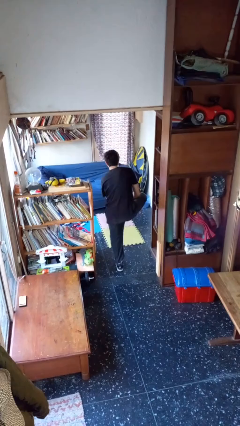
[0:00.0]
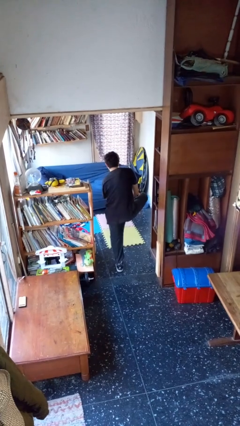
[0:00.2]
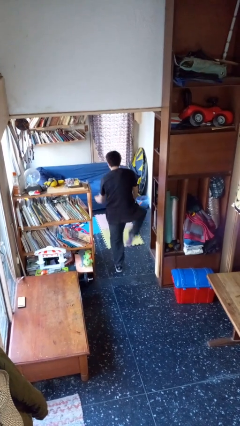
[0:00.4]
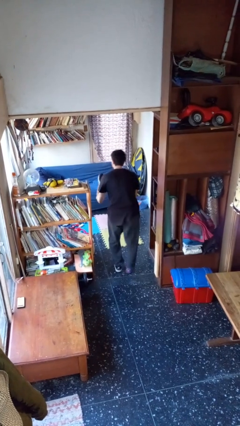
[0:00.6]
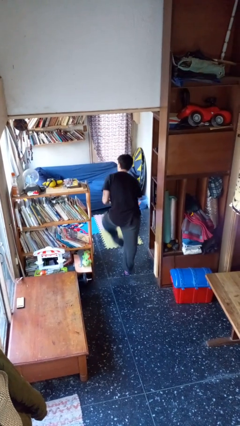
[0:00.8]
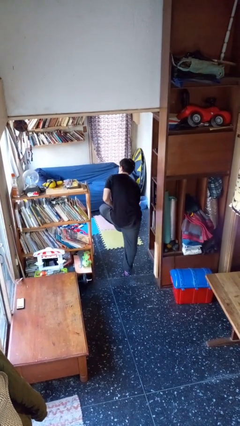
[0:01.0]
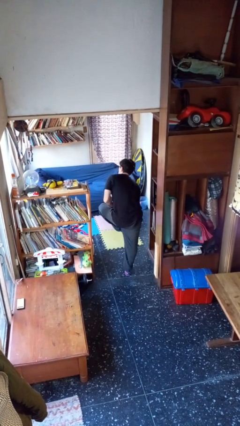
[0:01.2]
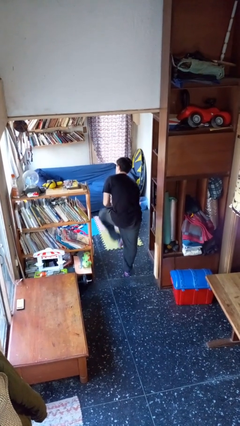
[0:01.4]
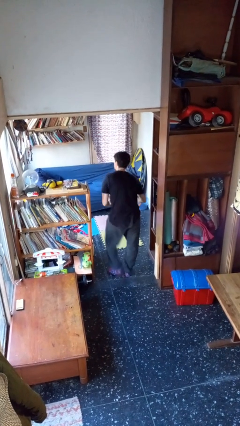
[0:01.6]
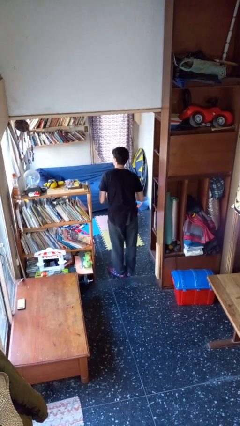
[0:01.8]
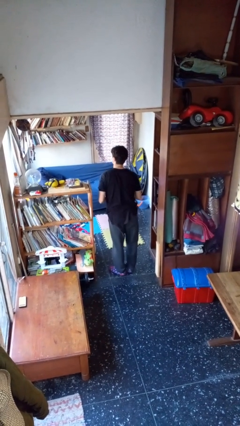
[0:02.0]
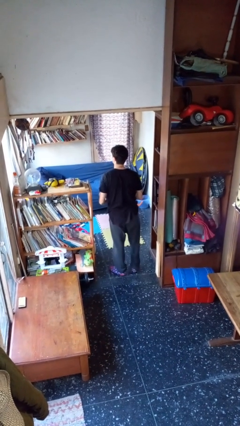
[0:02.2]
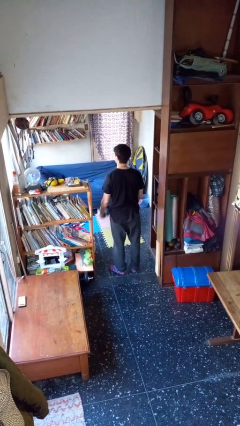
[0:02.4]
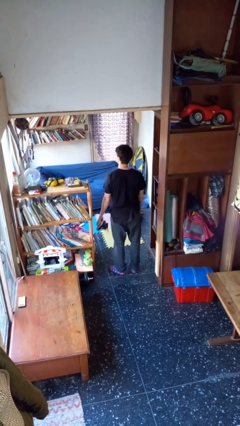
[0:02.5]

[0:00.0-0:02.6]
person takes off shoes

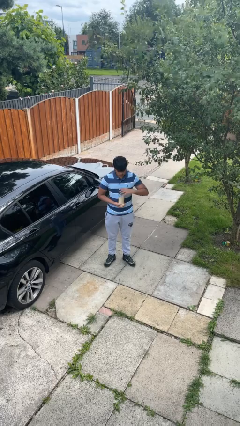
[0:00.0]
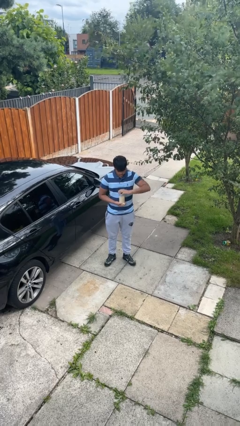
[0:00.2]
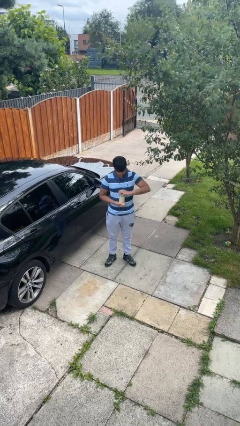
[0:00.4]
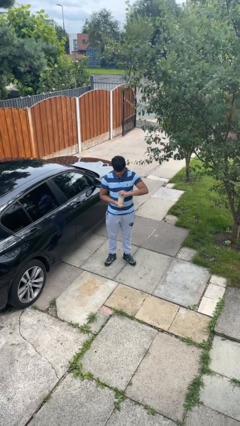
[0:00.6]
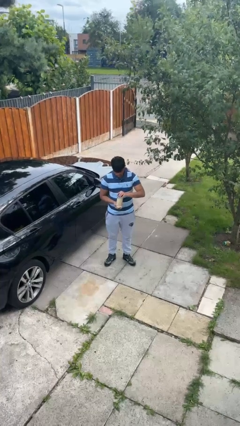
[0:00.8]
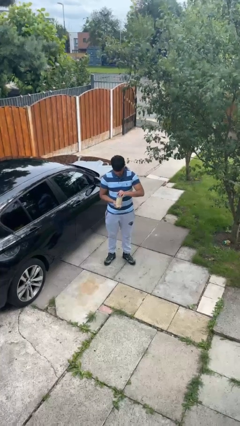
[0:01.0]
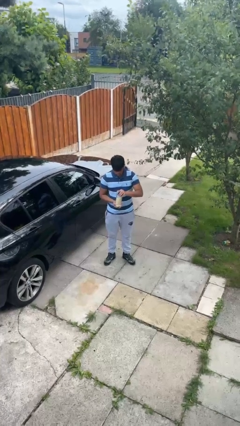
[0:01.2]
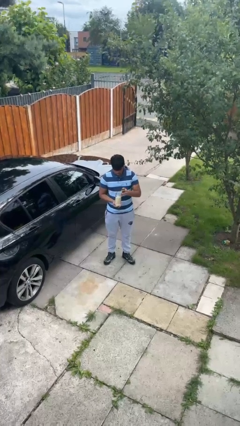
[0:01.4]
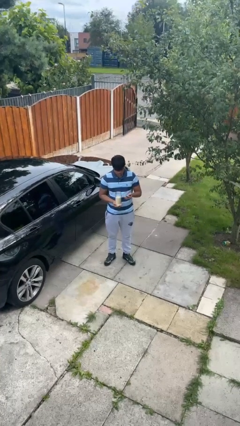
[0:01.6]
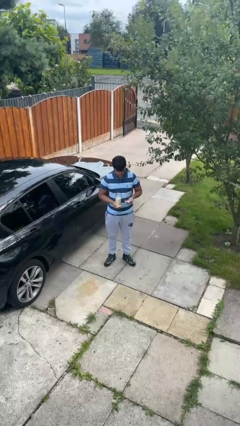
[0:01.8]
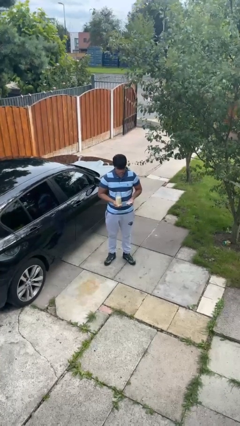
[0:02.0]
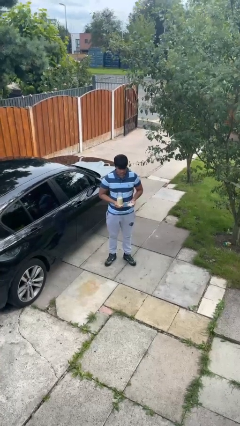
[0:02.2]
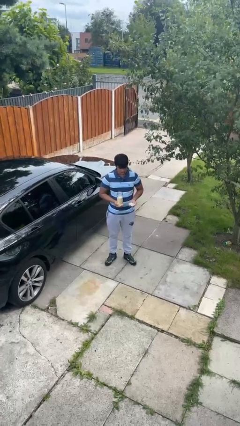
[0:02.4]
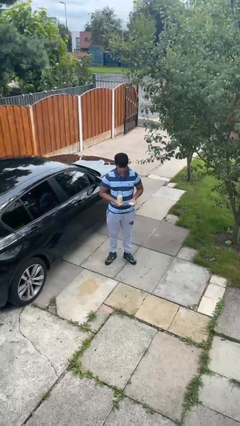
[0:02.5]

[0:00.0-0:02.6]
person opens jar

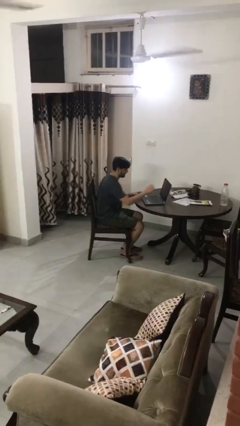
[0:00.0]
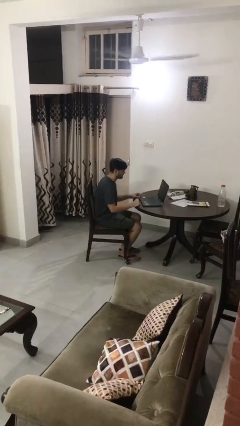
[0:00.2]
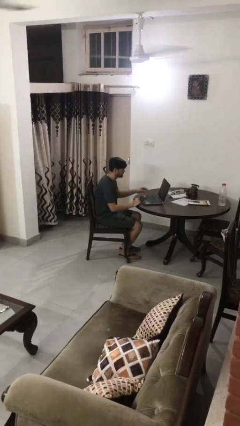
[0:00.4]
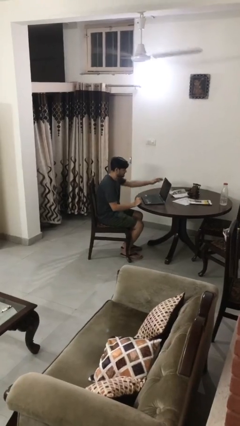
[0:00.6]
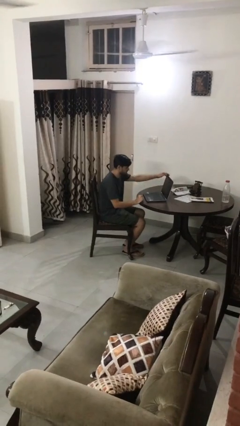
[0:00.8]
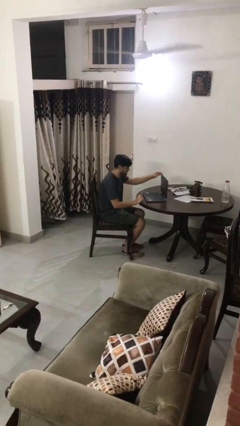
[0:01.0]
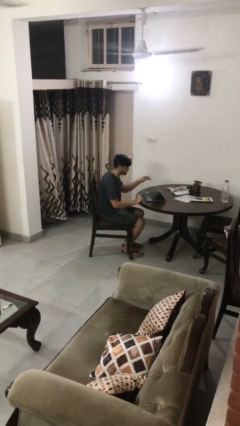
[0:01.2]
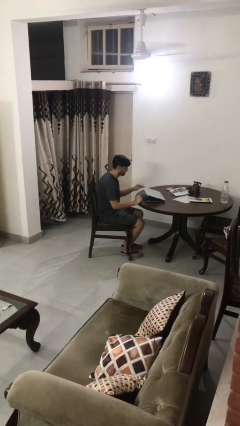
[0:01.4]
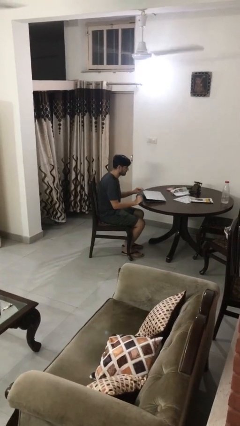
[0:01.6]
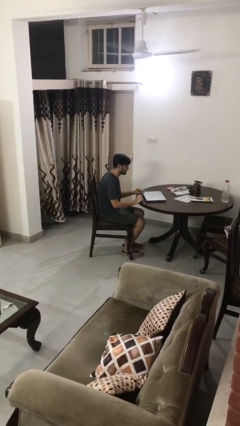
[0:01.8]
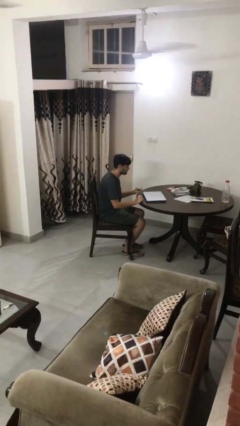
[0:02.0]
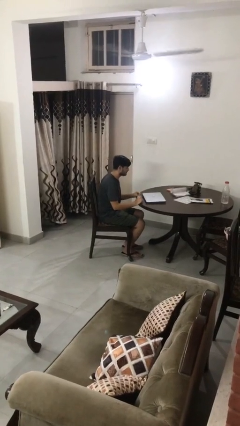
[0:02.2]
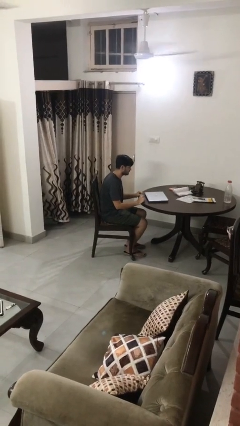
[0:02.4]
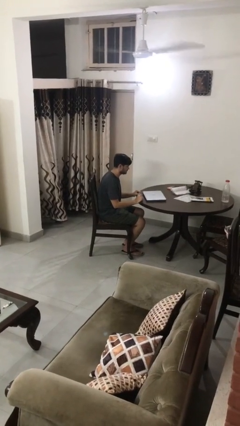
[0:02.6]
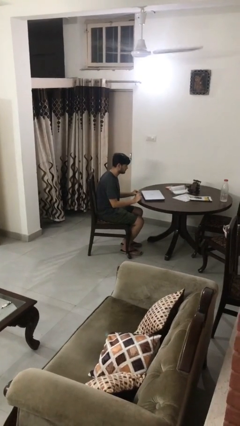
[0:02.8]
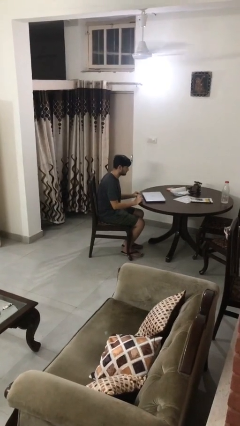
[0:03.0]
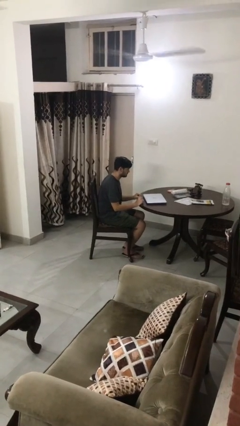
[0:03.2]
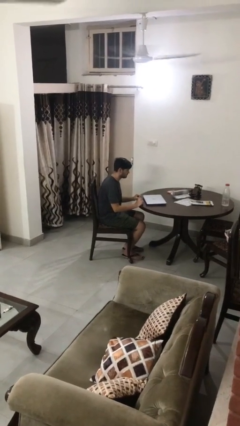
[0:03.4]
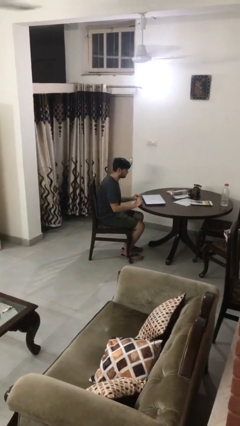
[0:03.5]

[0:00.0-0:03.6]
person closes laptop

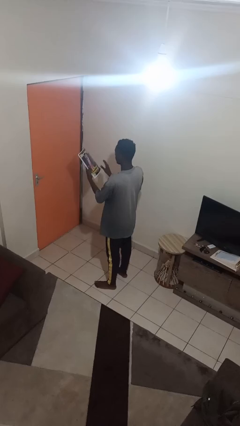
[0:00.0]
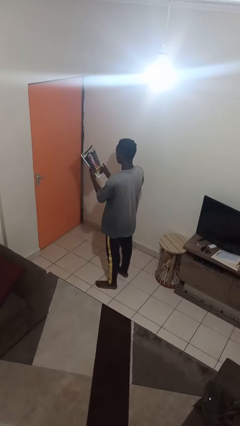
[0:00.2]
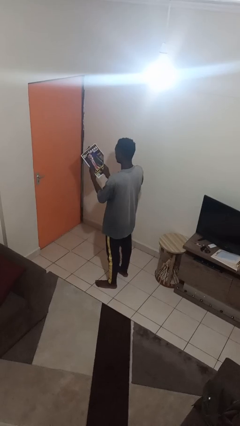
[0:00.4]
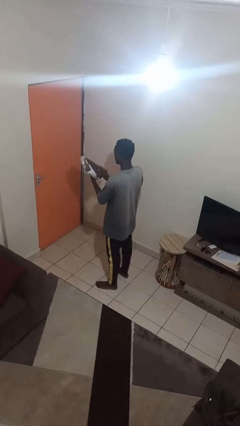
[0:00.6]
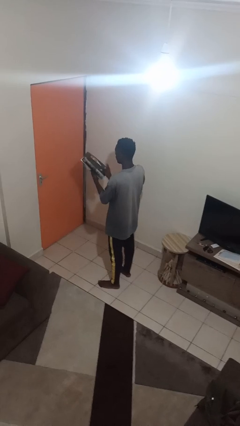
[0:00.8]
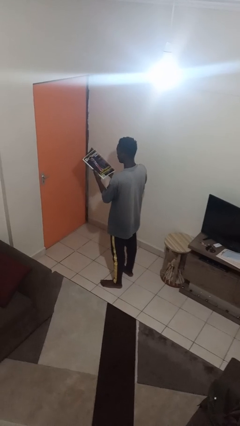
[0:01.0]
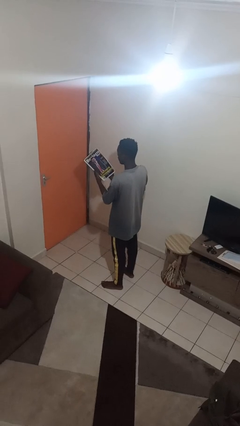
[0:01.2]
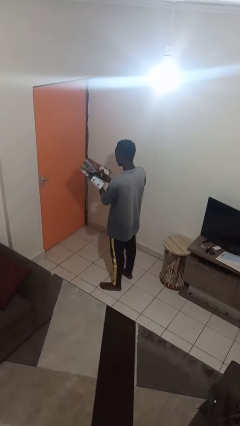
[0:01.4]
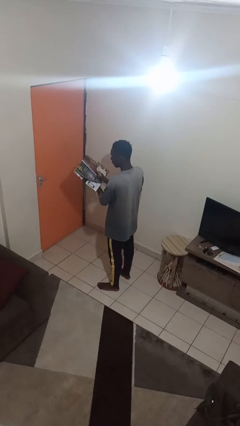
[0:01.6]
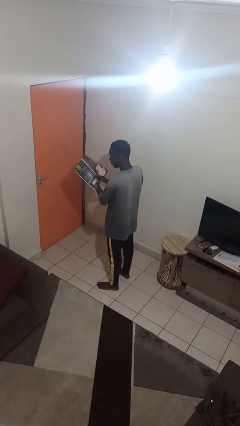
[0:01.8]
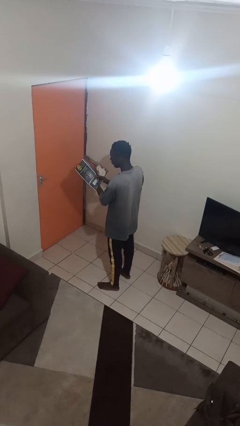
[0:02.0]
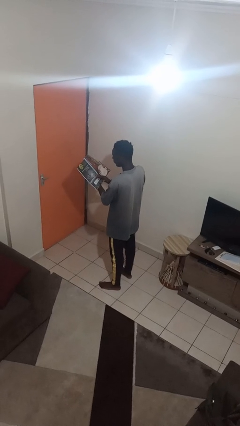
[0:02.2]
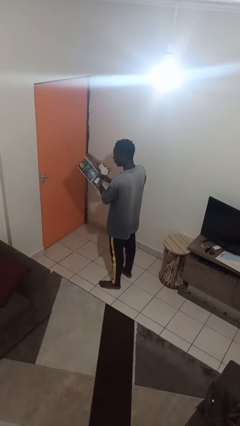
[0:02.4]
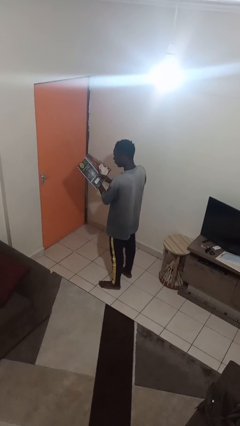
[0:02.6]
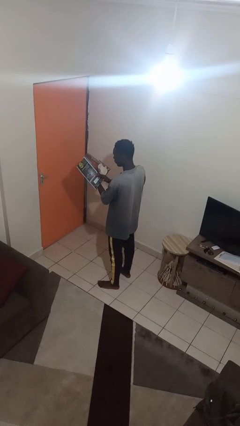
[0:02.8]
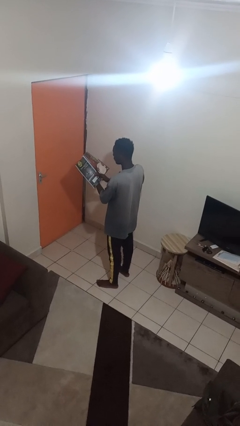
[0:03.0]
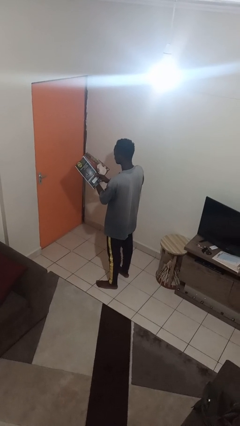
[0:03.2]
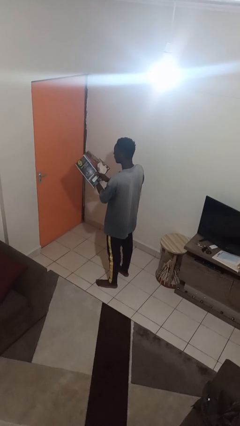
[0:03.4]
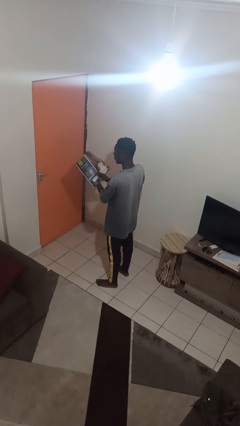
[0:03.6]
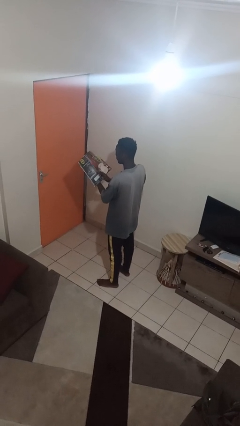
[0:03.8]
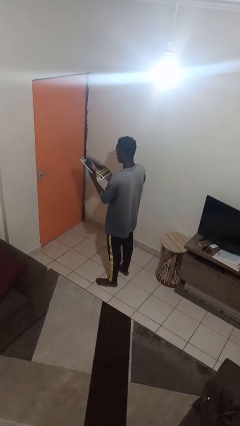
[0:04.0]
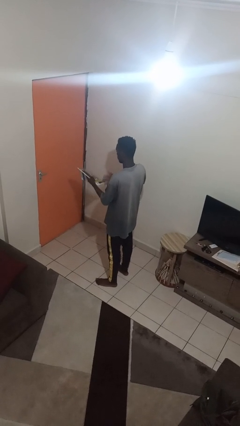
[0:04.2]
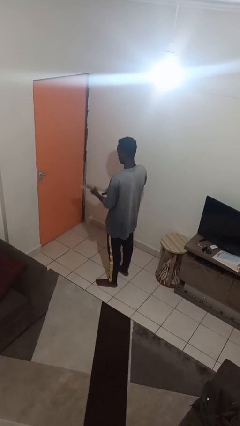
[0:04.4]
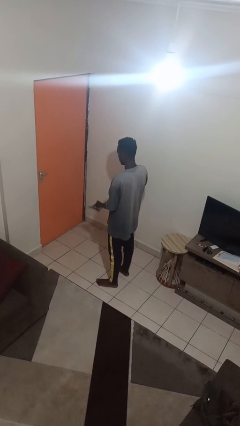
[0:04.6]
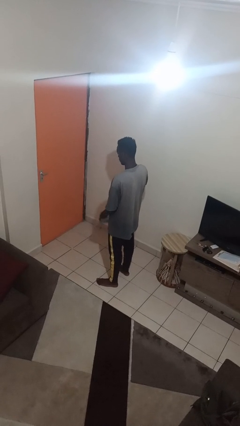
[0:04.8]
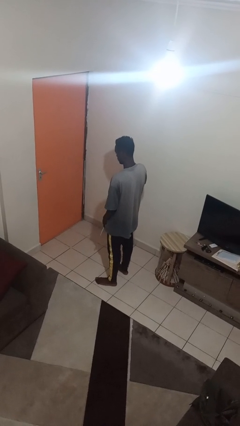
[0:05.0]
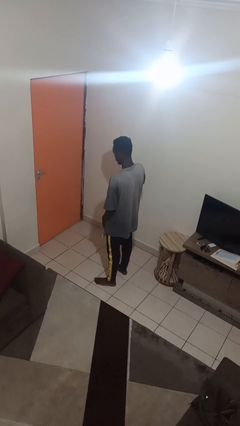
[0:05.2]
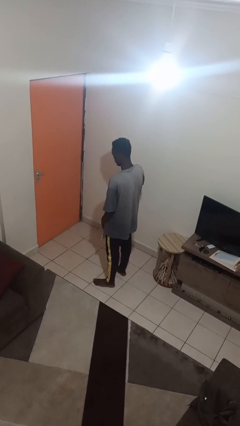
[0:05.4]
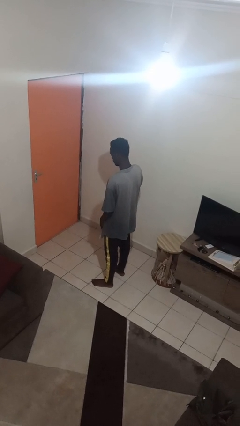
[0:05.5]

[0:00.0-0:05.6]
person reads magazine

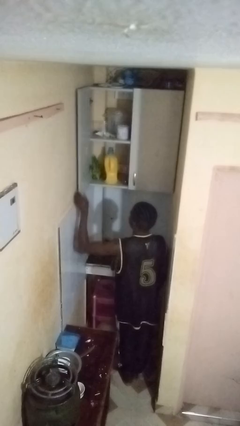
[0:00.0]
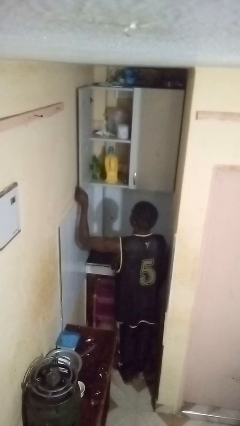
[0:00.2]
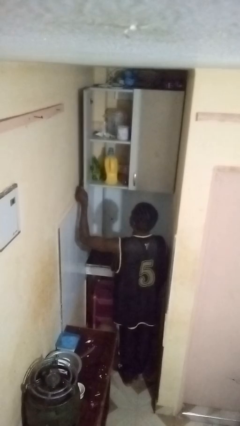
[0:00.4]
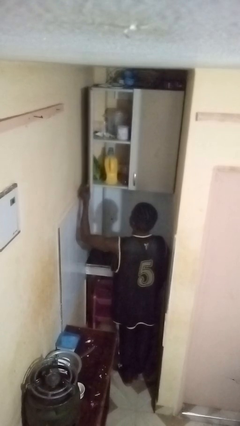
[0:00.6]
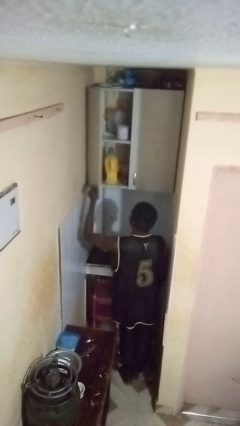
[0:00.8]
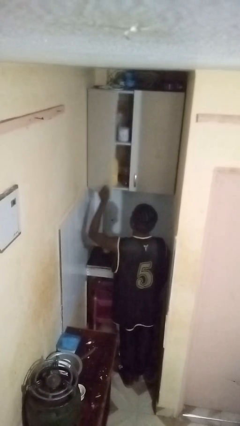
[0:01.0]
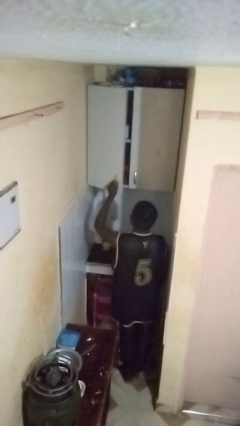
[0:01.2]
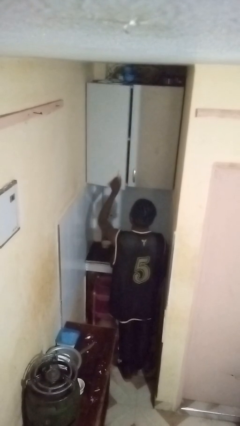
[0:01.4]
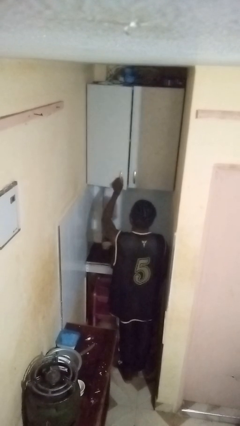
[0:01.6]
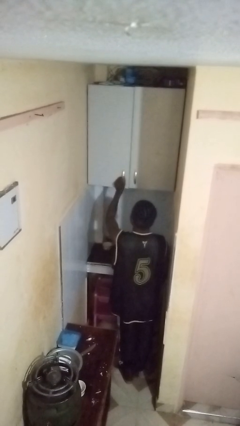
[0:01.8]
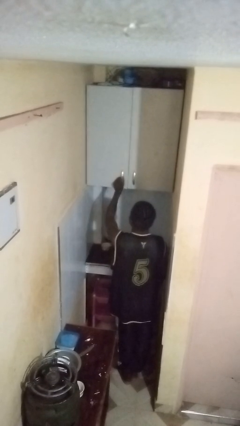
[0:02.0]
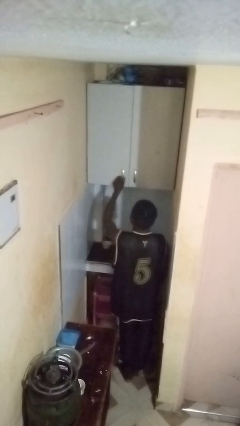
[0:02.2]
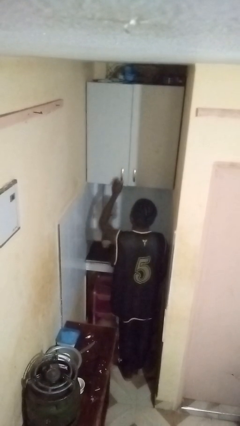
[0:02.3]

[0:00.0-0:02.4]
person closes cabinet

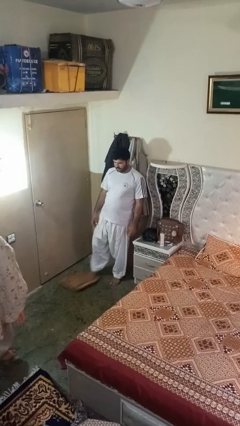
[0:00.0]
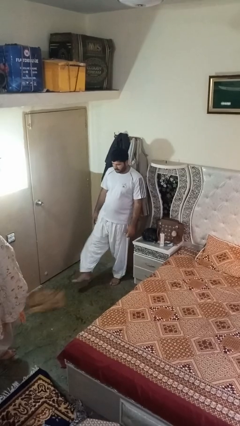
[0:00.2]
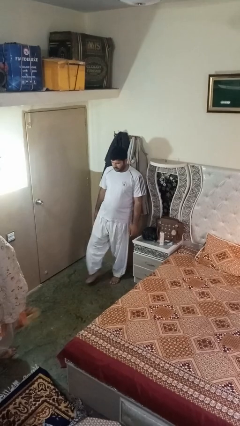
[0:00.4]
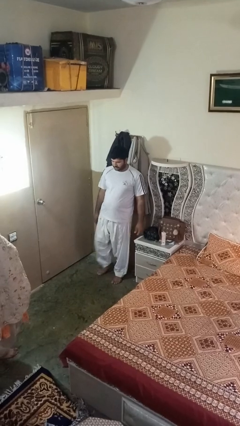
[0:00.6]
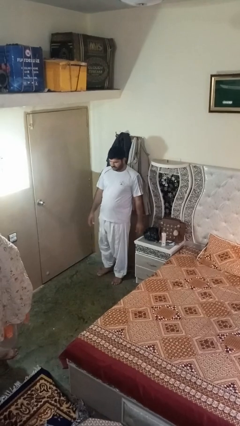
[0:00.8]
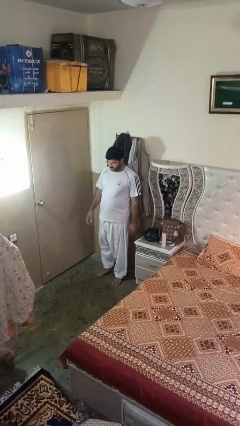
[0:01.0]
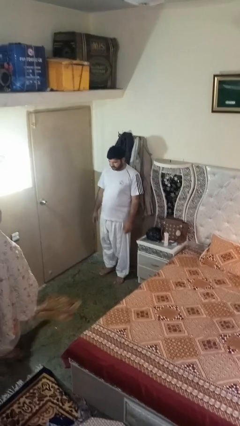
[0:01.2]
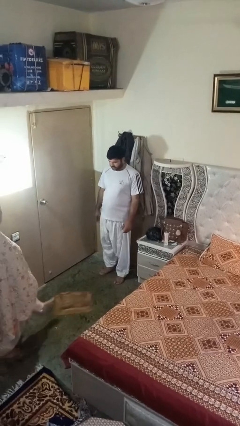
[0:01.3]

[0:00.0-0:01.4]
person kicks object to person
